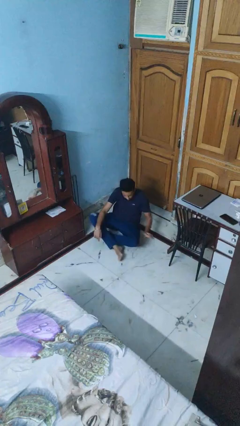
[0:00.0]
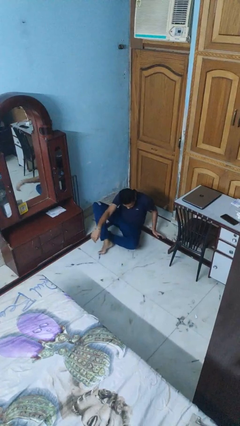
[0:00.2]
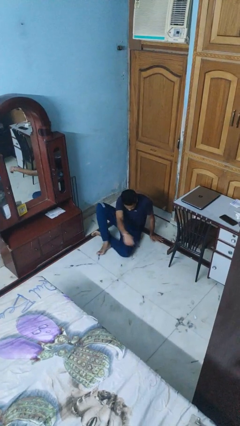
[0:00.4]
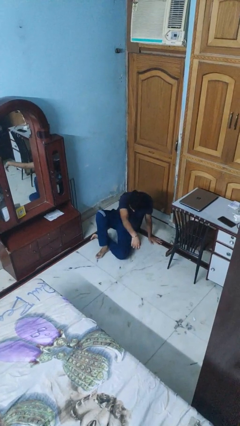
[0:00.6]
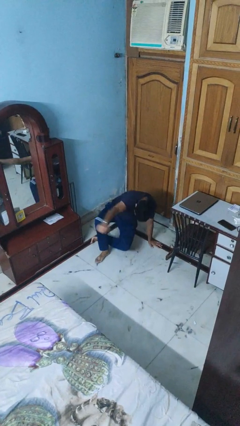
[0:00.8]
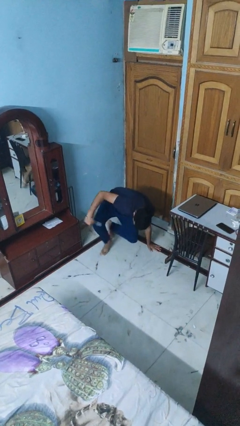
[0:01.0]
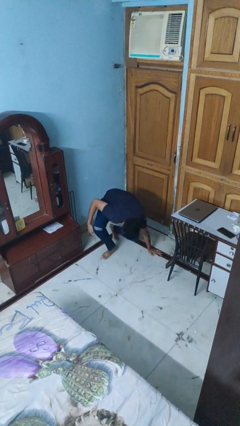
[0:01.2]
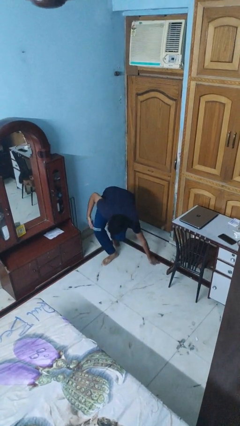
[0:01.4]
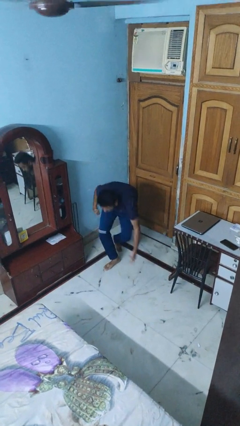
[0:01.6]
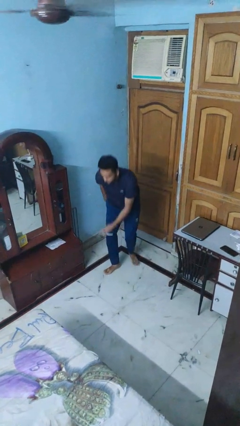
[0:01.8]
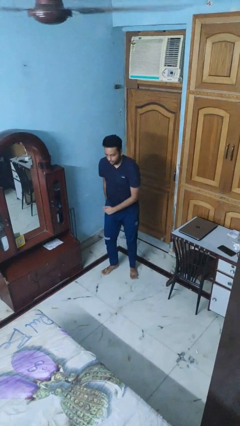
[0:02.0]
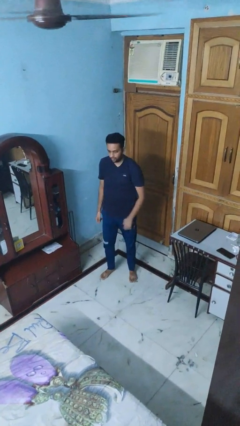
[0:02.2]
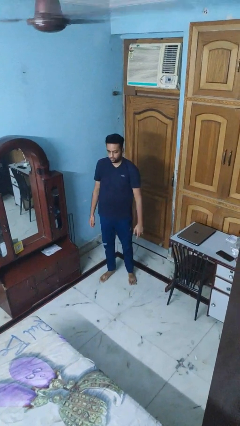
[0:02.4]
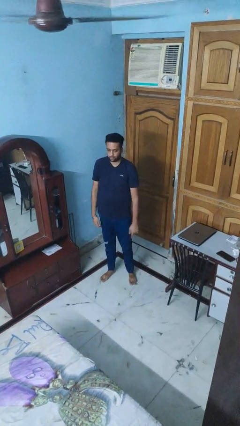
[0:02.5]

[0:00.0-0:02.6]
person stands up from floor

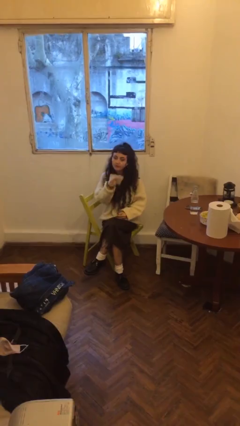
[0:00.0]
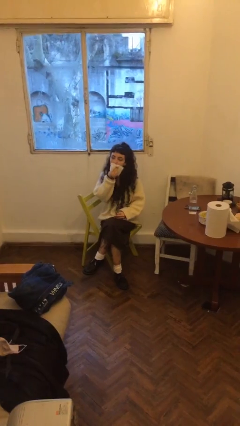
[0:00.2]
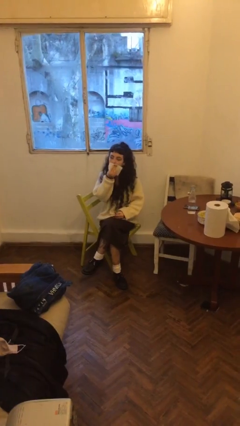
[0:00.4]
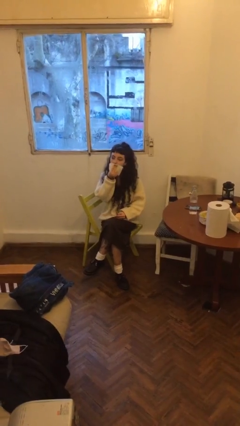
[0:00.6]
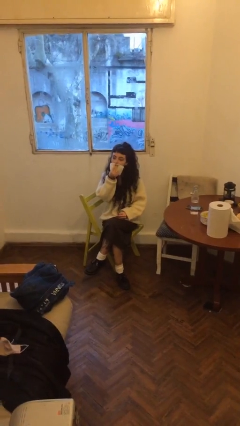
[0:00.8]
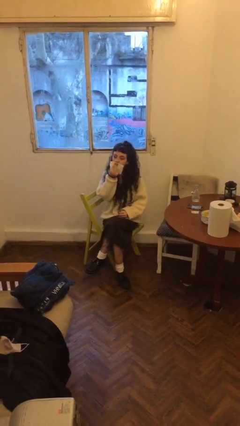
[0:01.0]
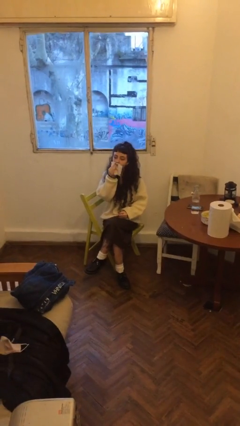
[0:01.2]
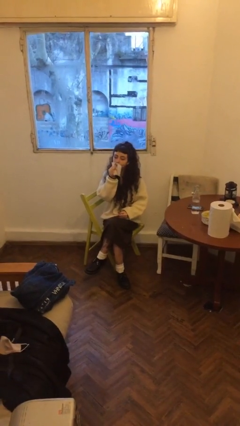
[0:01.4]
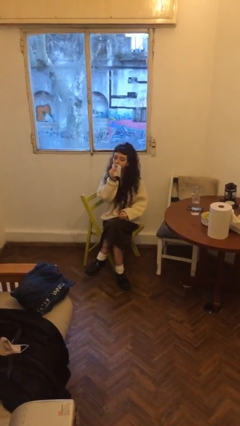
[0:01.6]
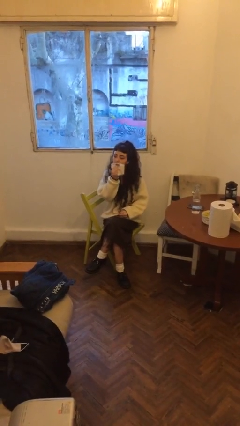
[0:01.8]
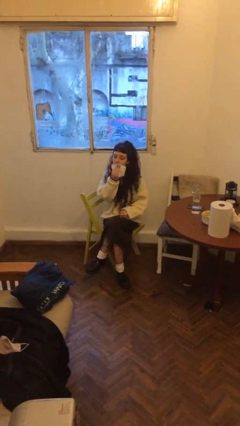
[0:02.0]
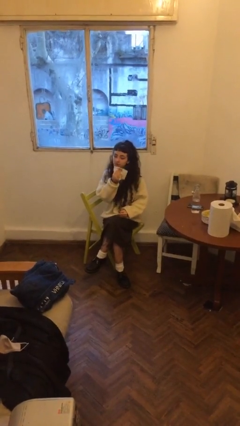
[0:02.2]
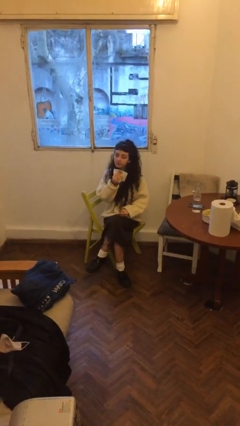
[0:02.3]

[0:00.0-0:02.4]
person wipes mouth with napkin

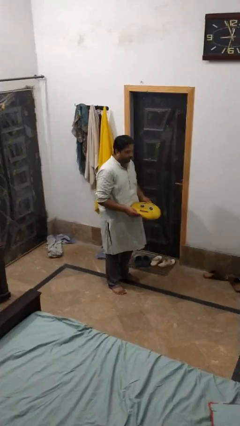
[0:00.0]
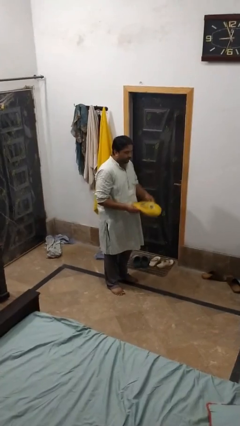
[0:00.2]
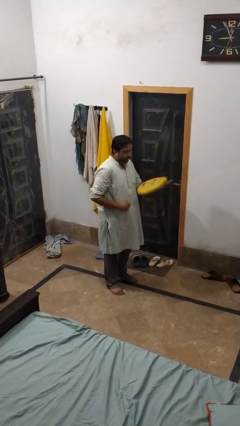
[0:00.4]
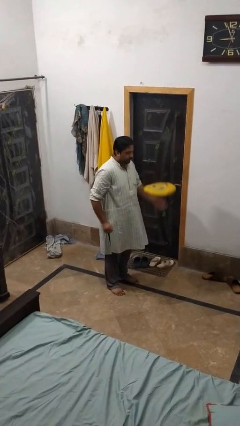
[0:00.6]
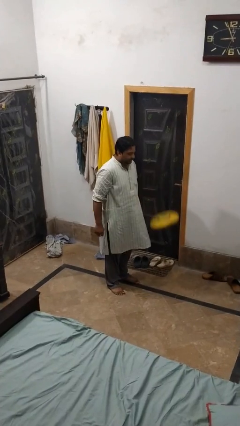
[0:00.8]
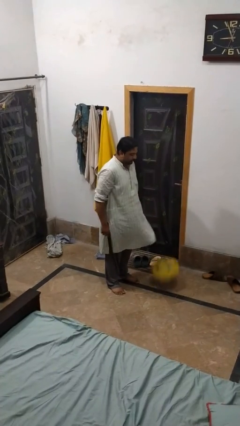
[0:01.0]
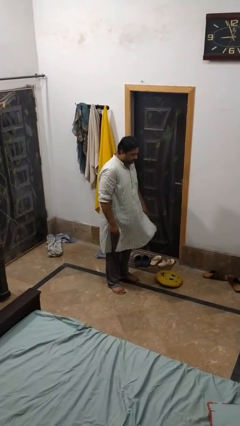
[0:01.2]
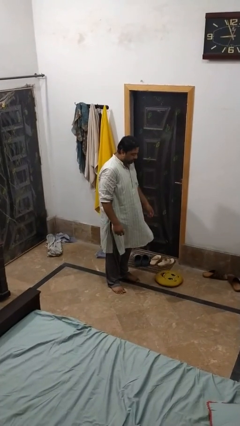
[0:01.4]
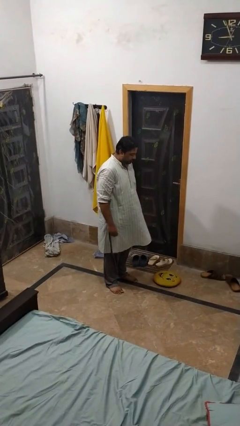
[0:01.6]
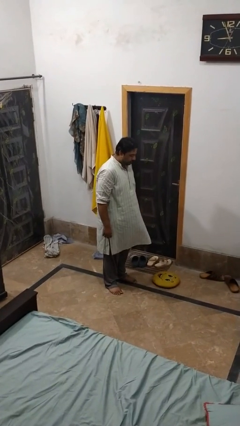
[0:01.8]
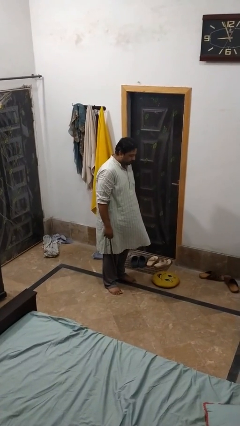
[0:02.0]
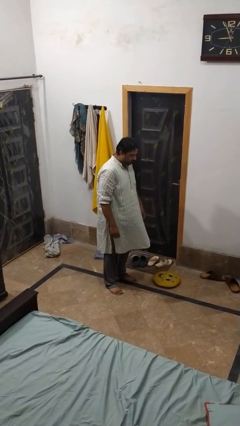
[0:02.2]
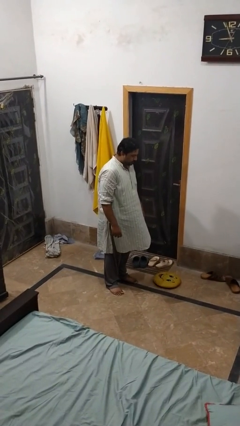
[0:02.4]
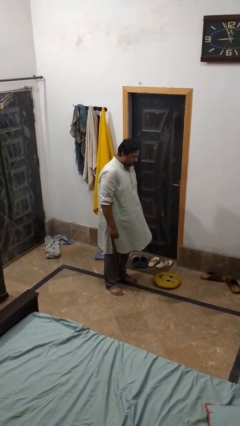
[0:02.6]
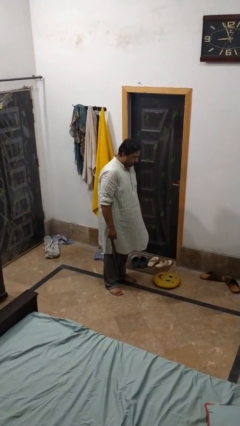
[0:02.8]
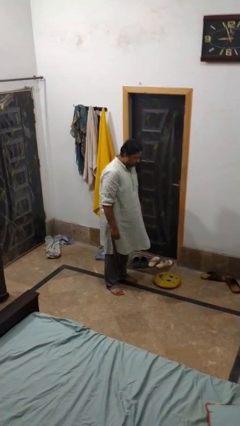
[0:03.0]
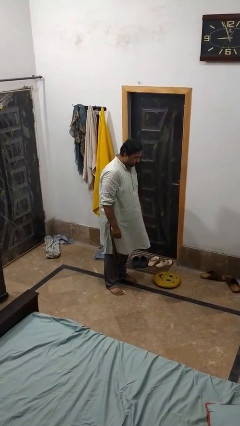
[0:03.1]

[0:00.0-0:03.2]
person throws object to ground

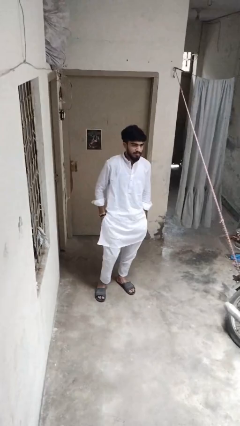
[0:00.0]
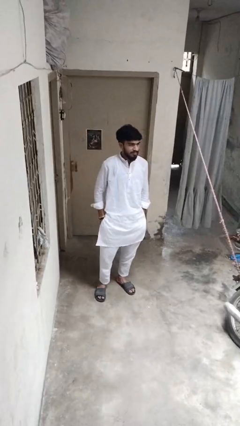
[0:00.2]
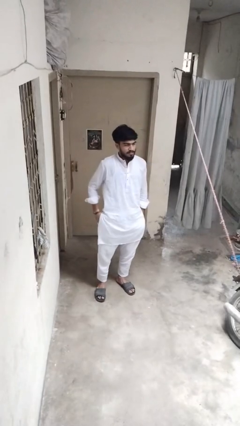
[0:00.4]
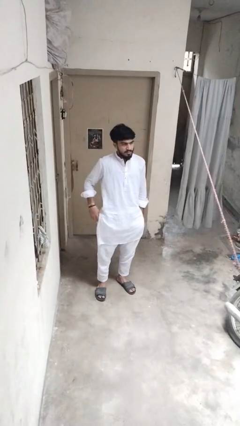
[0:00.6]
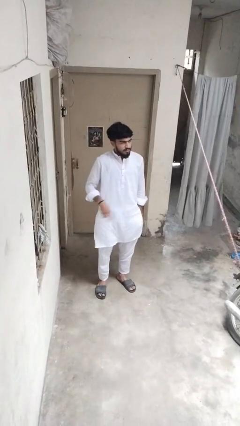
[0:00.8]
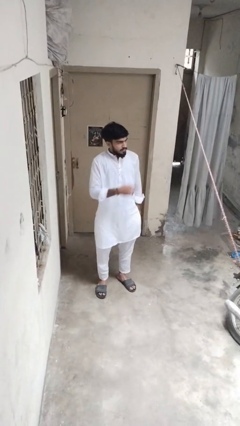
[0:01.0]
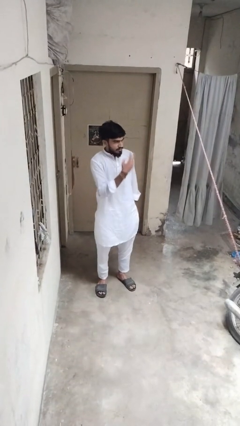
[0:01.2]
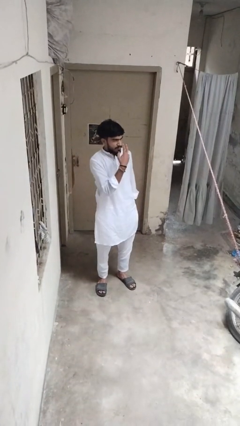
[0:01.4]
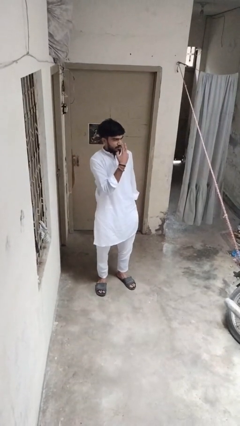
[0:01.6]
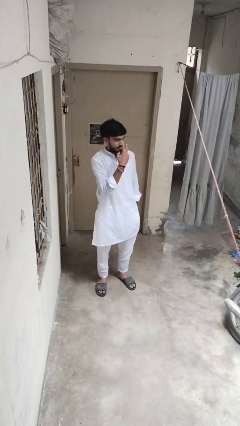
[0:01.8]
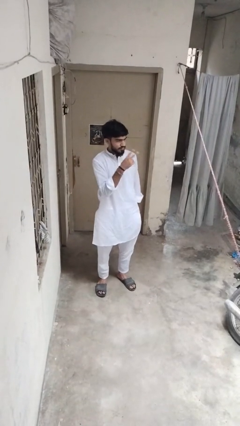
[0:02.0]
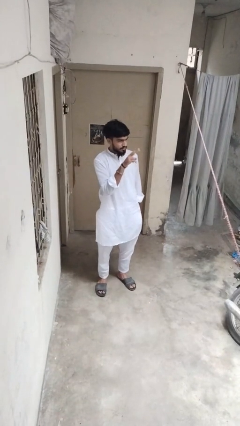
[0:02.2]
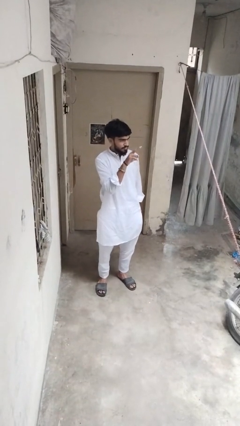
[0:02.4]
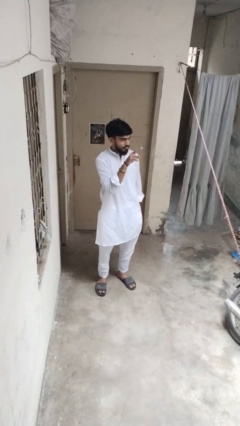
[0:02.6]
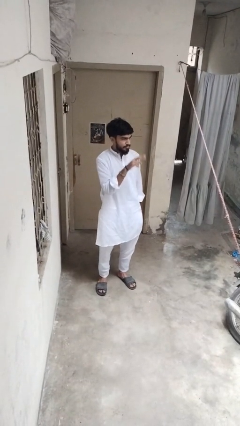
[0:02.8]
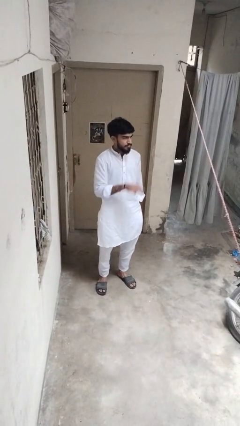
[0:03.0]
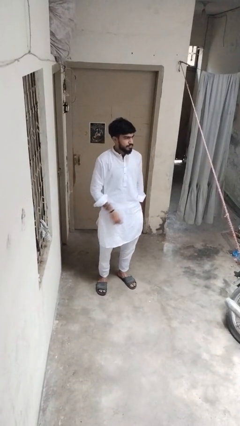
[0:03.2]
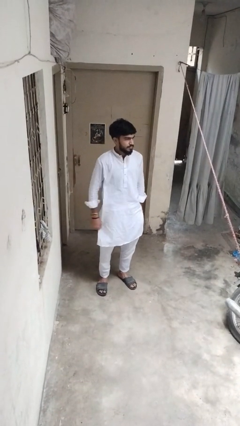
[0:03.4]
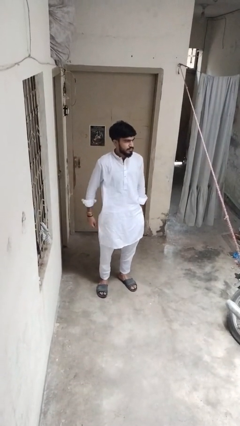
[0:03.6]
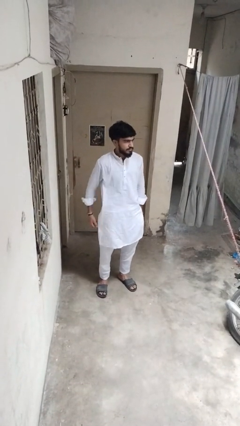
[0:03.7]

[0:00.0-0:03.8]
person gestures watch closely

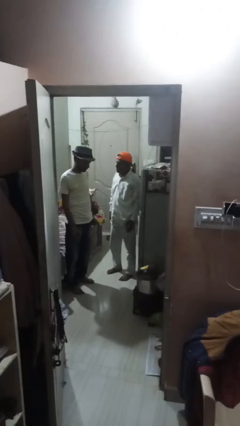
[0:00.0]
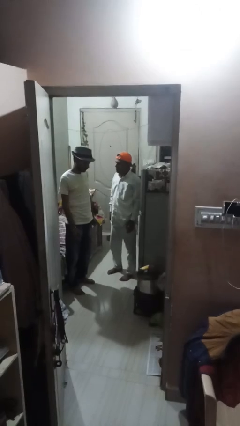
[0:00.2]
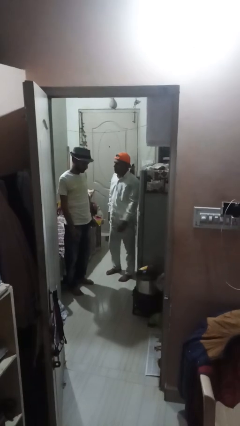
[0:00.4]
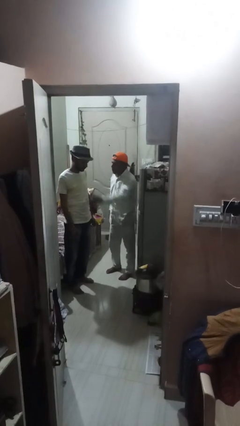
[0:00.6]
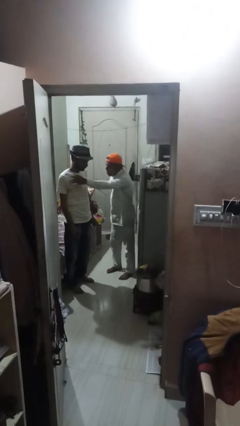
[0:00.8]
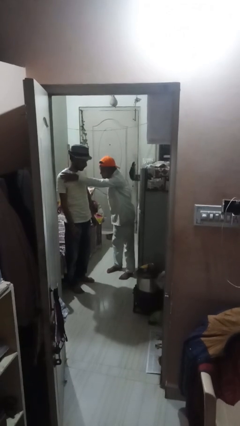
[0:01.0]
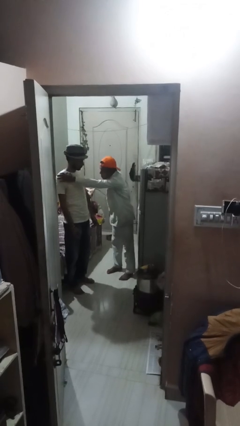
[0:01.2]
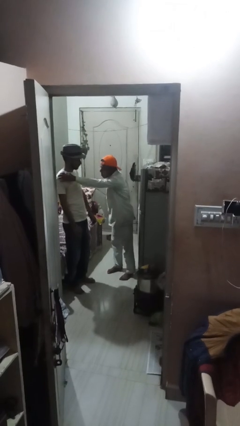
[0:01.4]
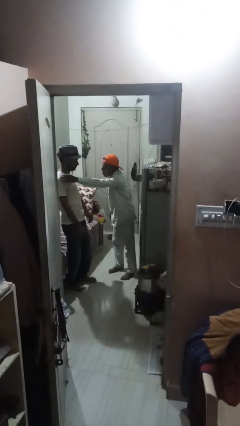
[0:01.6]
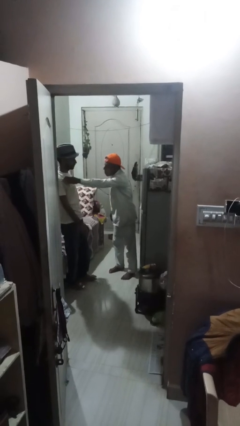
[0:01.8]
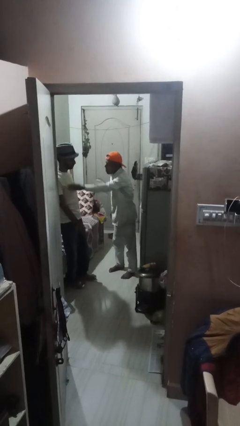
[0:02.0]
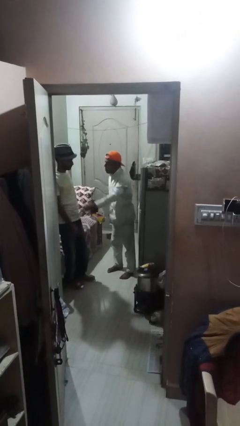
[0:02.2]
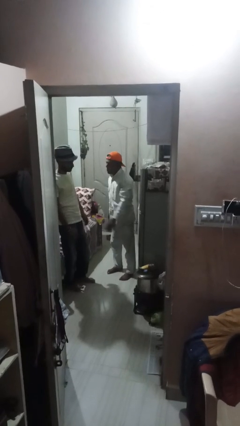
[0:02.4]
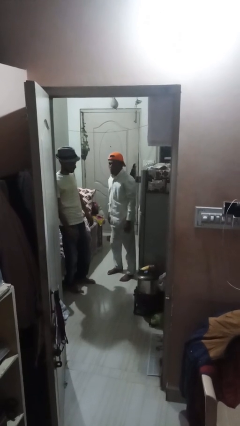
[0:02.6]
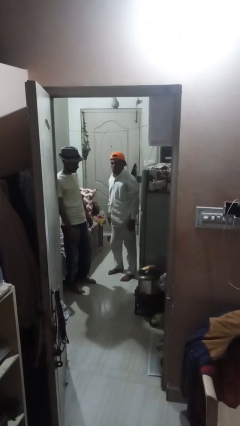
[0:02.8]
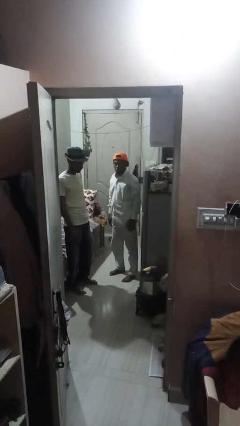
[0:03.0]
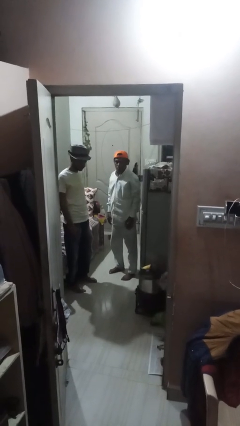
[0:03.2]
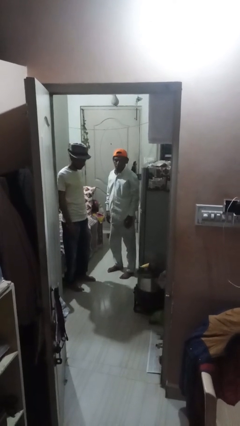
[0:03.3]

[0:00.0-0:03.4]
person shoves person

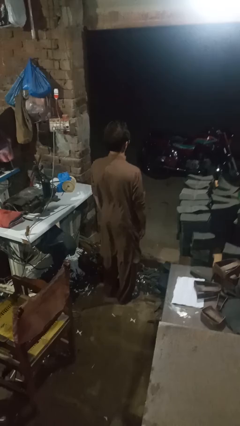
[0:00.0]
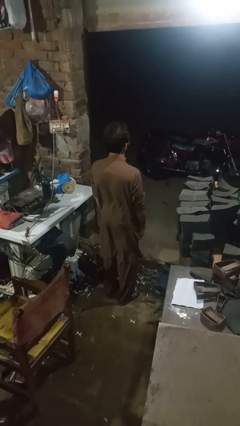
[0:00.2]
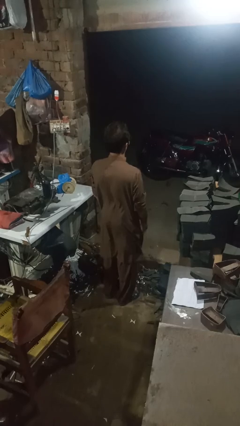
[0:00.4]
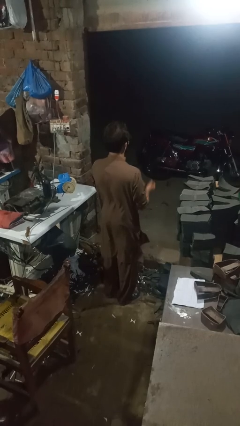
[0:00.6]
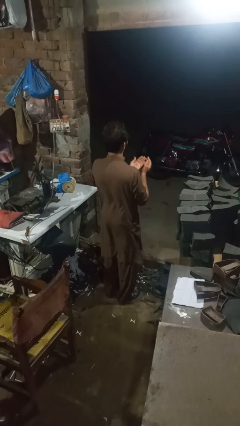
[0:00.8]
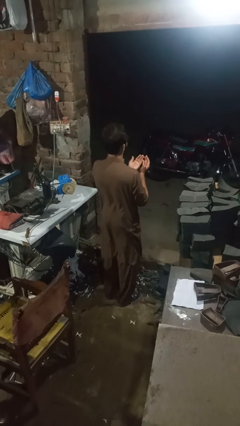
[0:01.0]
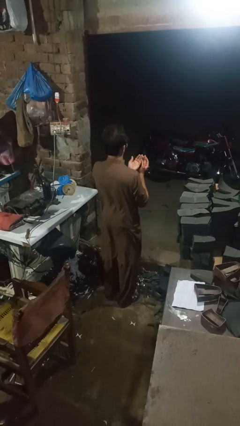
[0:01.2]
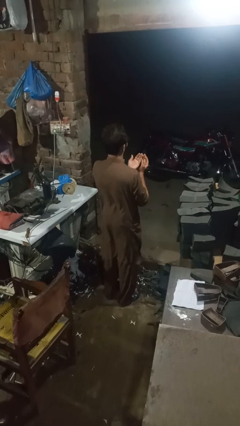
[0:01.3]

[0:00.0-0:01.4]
person prays

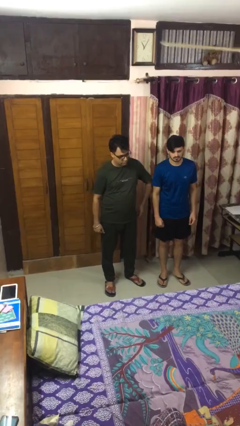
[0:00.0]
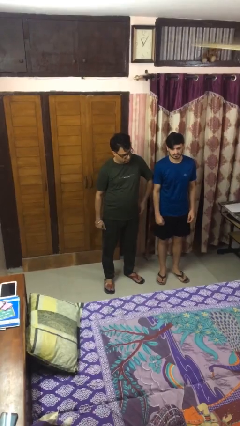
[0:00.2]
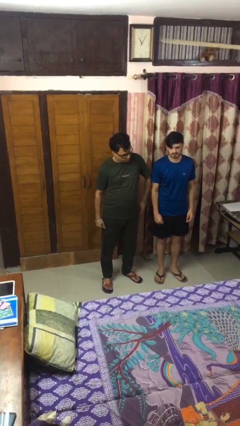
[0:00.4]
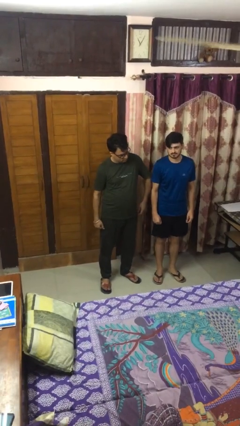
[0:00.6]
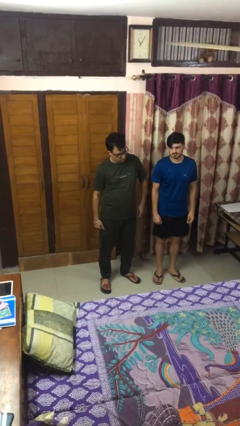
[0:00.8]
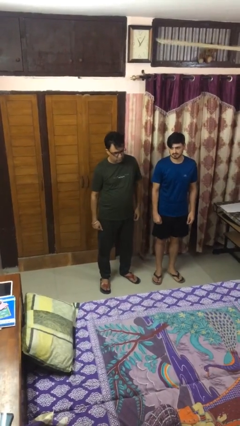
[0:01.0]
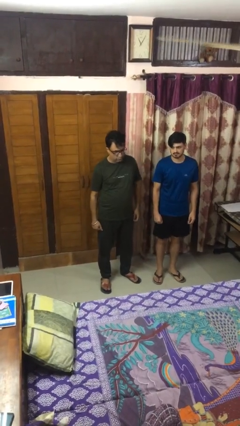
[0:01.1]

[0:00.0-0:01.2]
person nudges person with elbow
